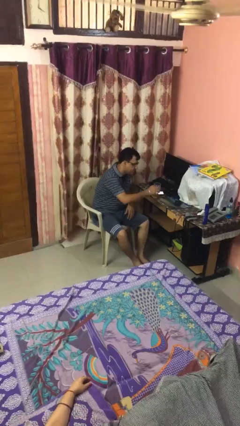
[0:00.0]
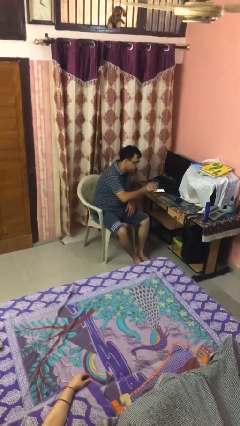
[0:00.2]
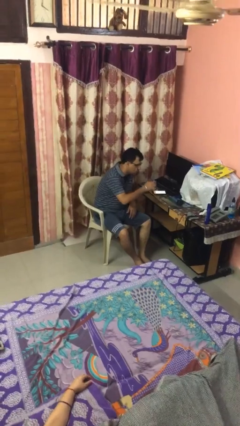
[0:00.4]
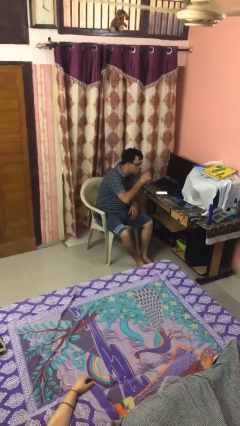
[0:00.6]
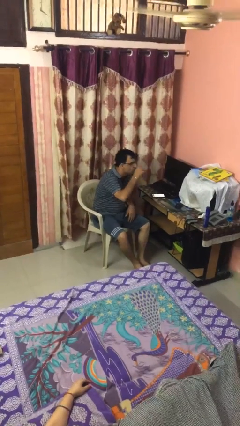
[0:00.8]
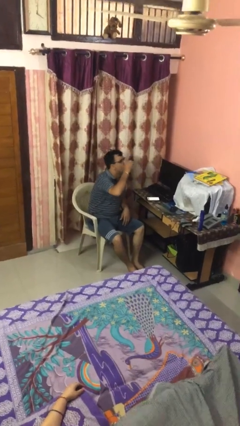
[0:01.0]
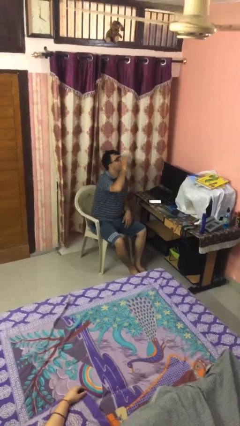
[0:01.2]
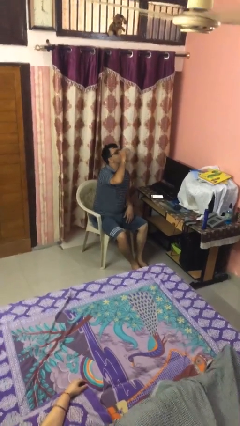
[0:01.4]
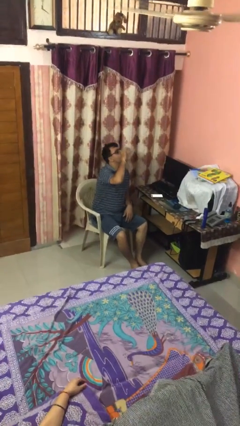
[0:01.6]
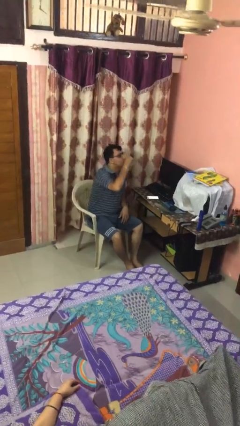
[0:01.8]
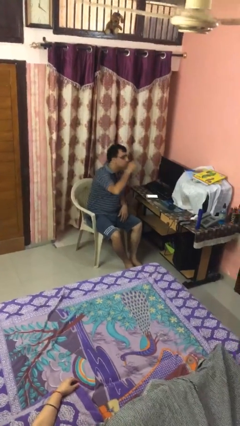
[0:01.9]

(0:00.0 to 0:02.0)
person drinks from shotglass

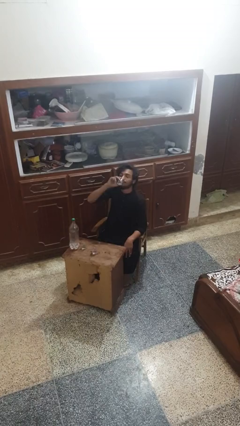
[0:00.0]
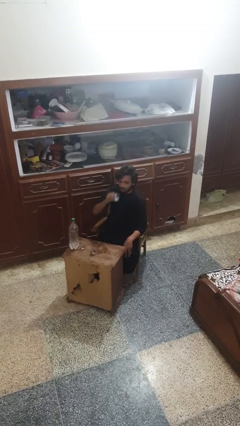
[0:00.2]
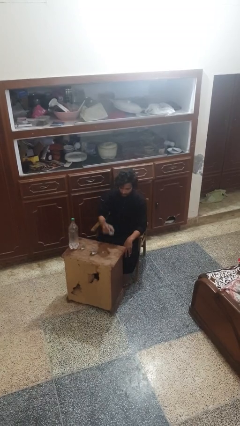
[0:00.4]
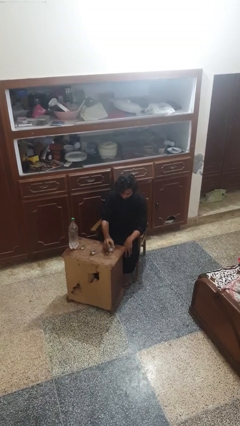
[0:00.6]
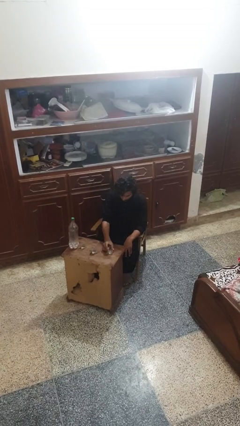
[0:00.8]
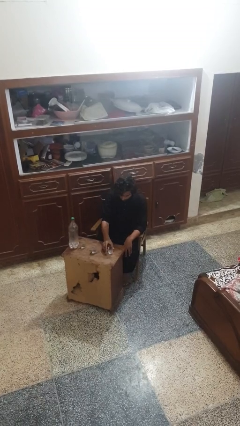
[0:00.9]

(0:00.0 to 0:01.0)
person puts down object on table

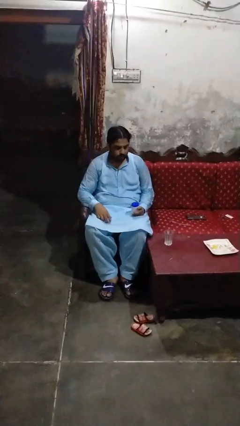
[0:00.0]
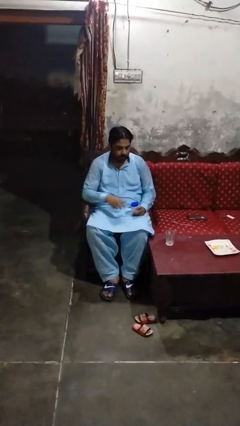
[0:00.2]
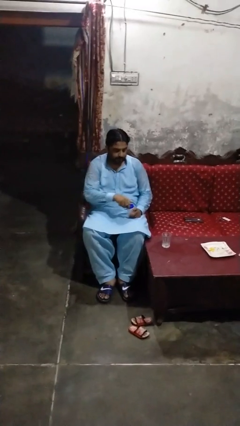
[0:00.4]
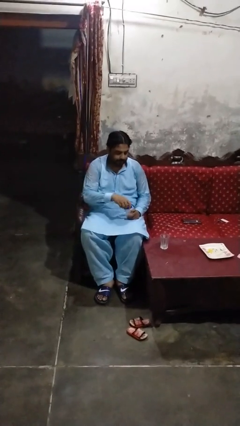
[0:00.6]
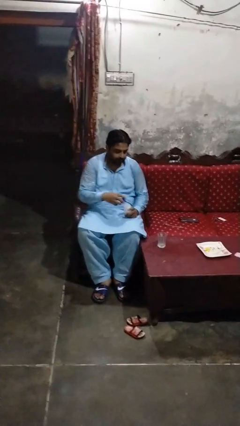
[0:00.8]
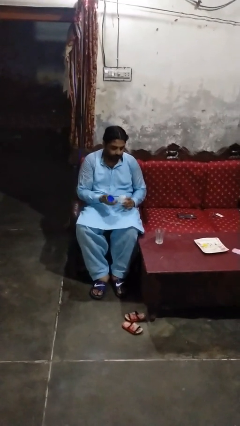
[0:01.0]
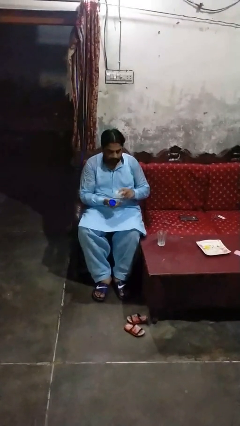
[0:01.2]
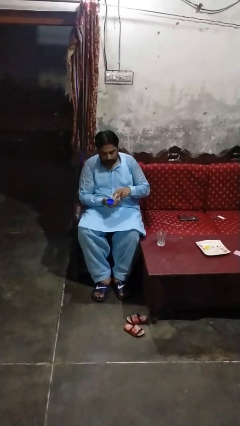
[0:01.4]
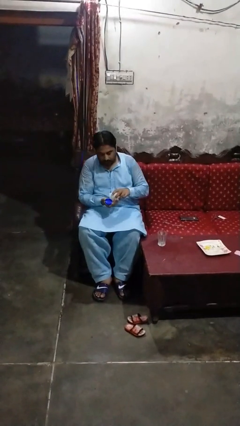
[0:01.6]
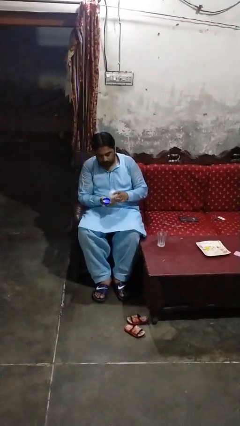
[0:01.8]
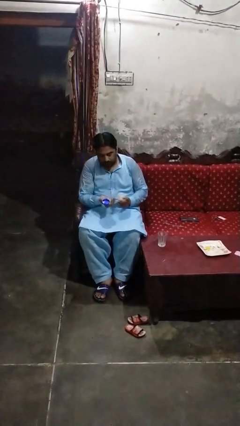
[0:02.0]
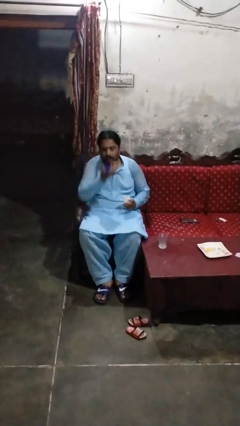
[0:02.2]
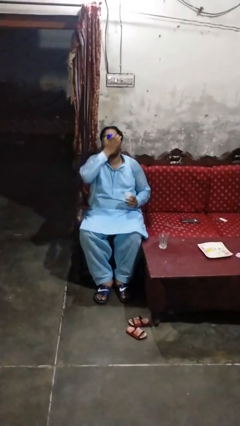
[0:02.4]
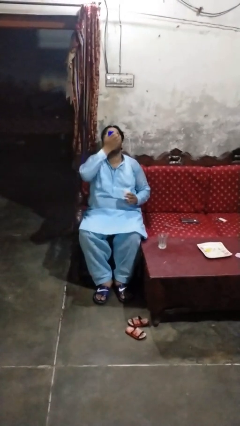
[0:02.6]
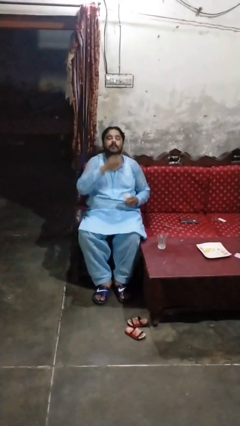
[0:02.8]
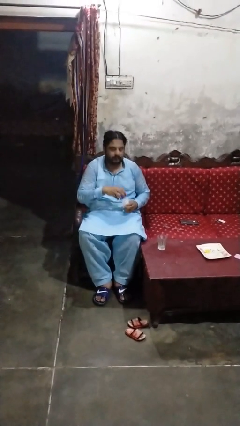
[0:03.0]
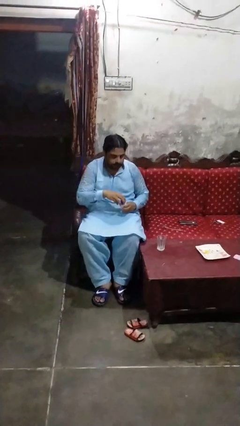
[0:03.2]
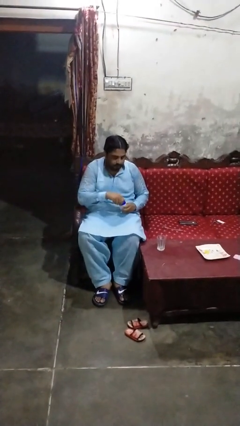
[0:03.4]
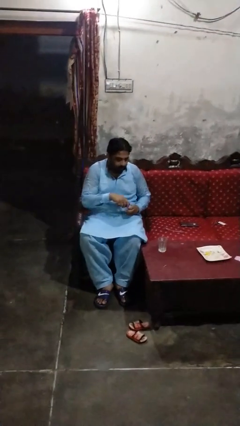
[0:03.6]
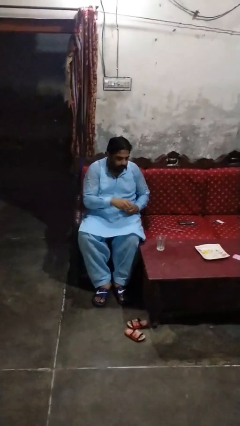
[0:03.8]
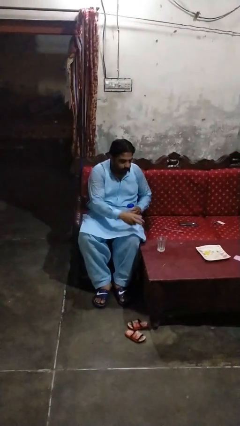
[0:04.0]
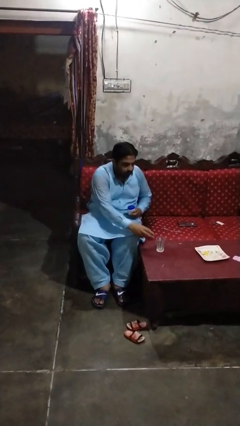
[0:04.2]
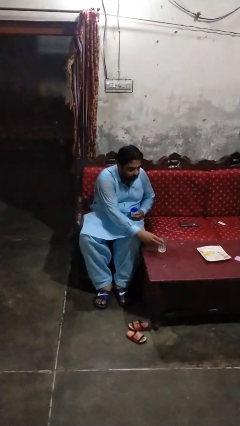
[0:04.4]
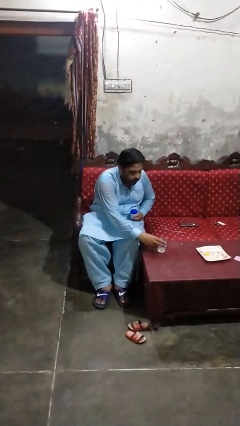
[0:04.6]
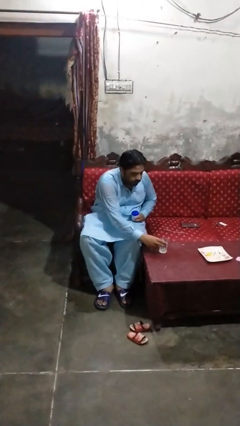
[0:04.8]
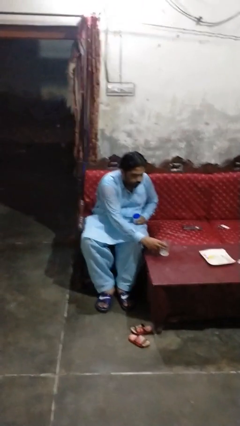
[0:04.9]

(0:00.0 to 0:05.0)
person takes medicine pills

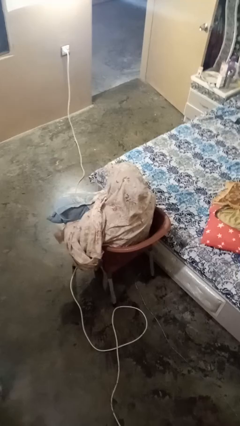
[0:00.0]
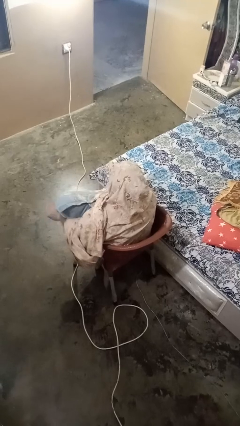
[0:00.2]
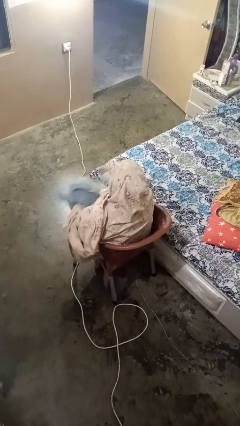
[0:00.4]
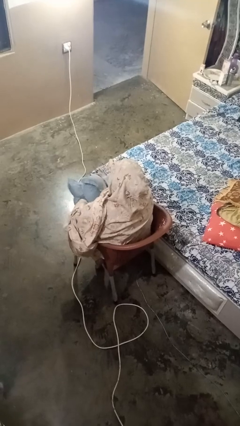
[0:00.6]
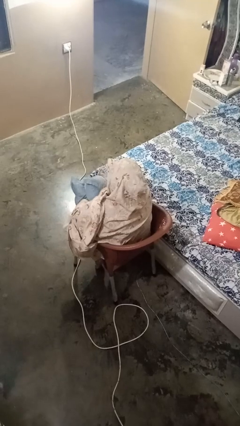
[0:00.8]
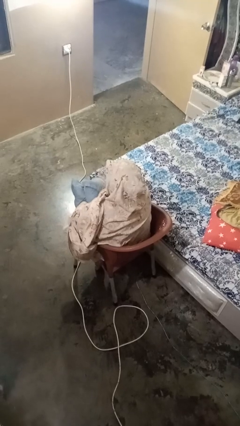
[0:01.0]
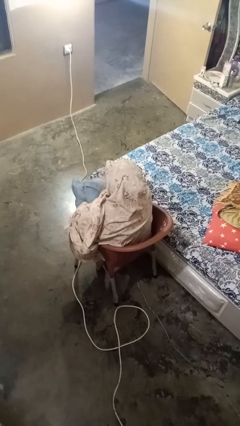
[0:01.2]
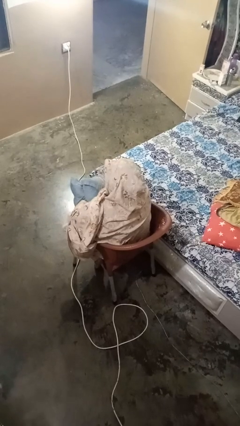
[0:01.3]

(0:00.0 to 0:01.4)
person squeezes object

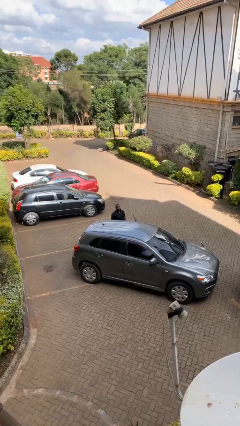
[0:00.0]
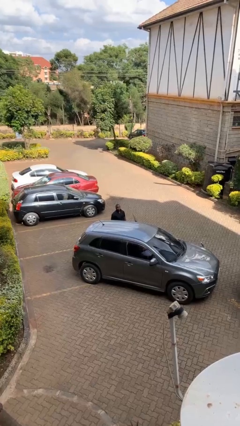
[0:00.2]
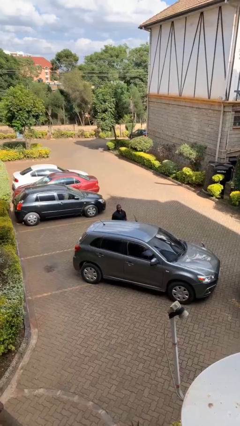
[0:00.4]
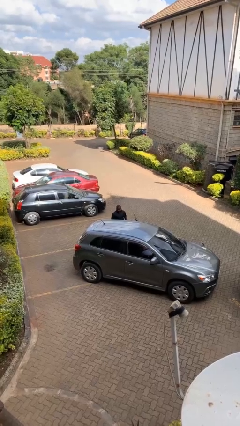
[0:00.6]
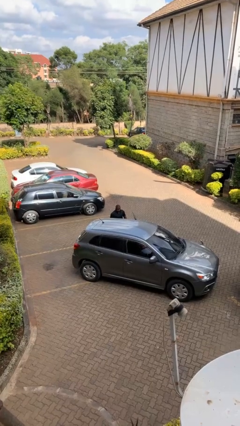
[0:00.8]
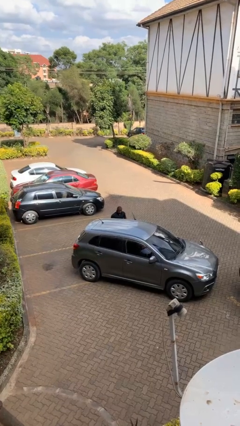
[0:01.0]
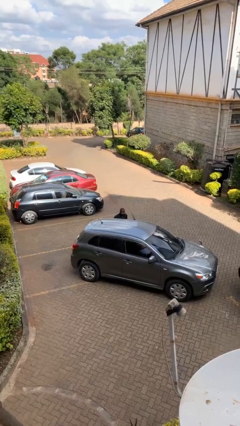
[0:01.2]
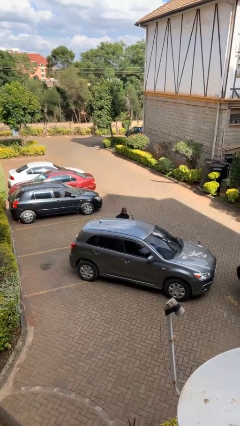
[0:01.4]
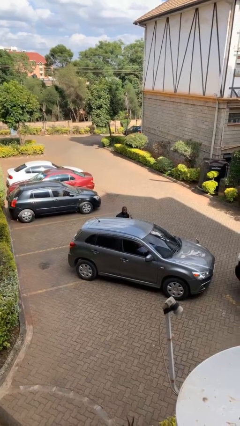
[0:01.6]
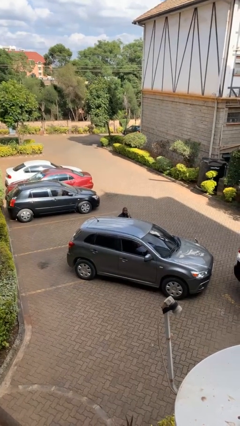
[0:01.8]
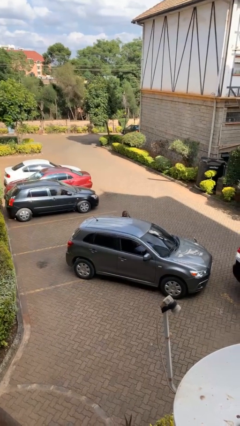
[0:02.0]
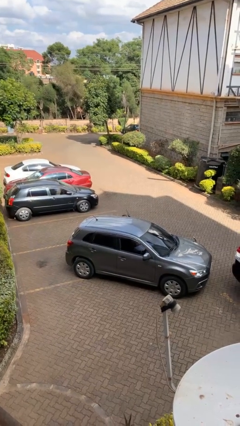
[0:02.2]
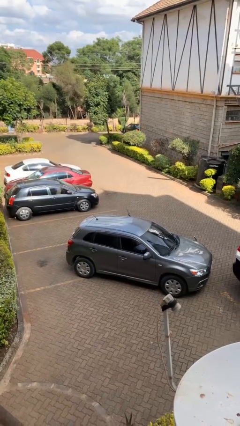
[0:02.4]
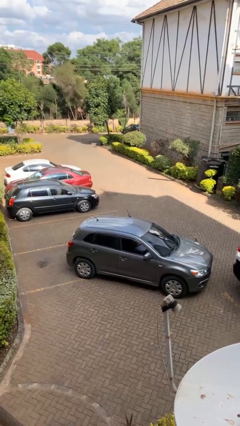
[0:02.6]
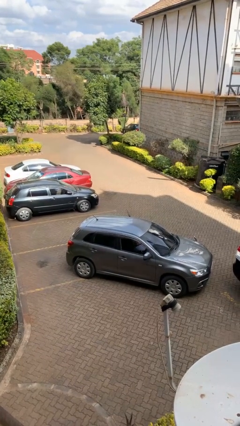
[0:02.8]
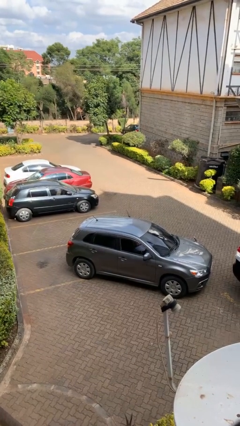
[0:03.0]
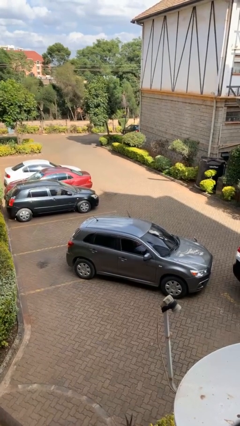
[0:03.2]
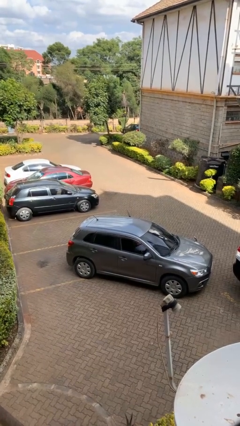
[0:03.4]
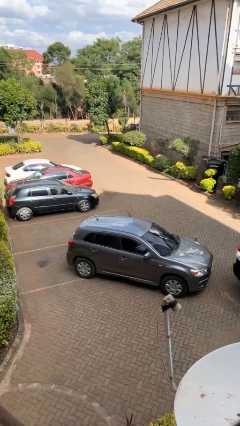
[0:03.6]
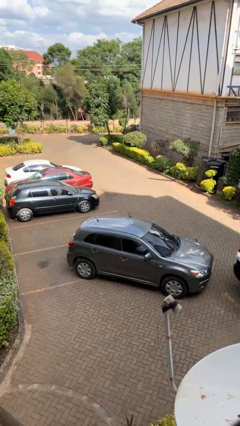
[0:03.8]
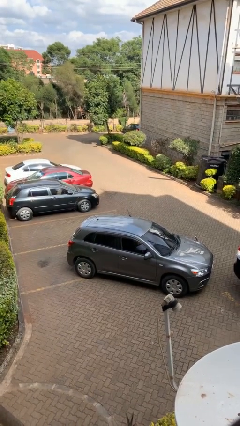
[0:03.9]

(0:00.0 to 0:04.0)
person enters car

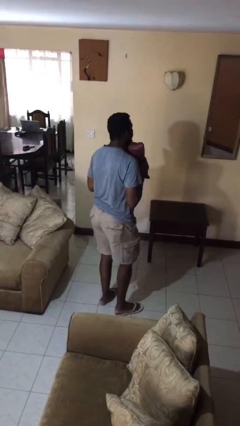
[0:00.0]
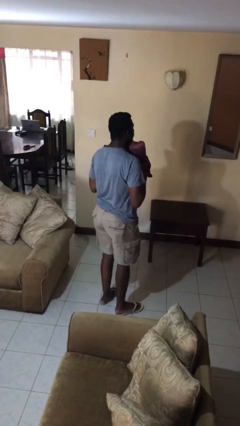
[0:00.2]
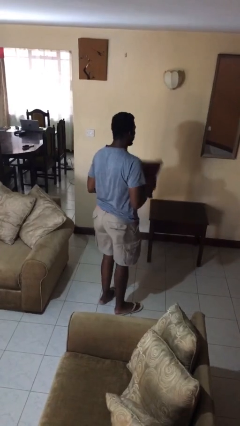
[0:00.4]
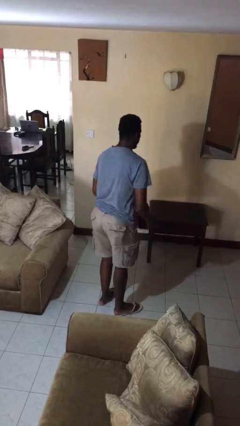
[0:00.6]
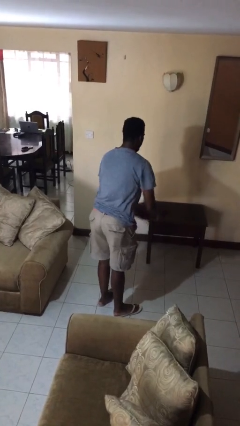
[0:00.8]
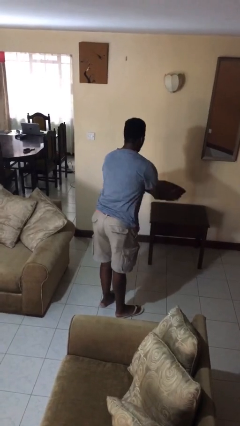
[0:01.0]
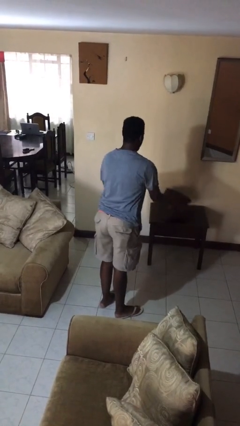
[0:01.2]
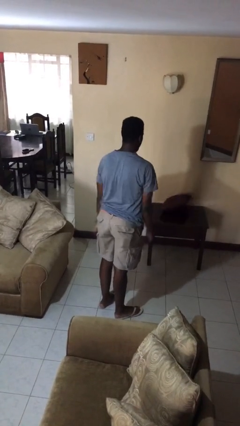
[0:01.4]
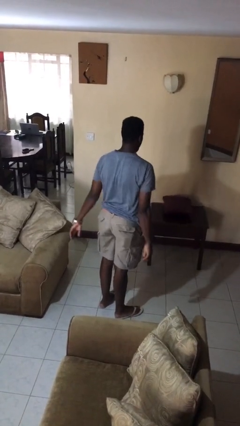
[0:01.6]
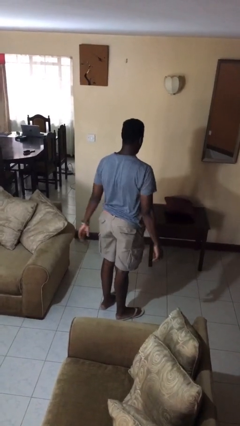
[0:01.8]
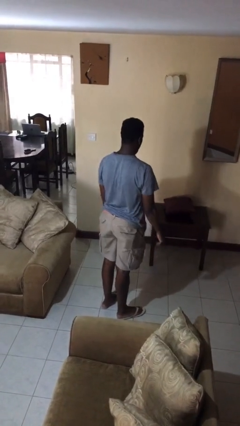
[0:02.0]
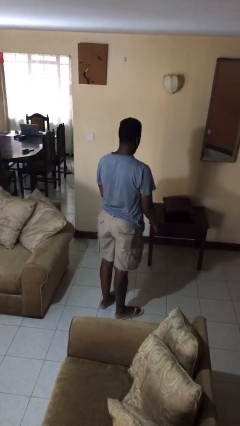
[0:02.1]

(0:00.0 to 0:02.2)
person throws object on table

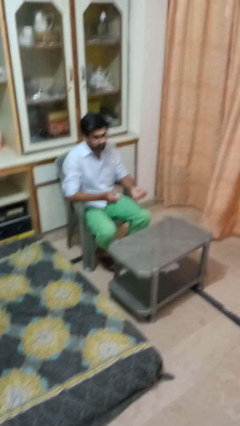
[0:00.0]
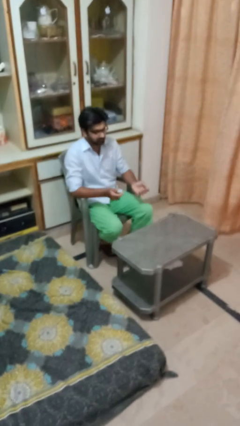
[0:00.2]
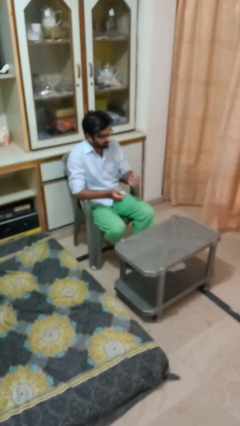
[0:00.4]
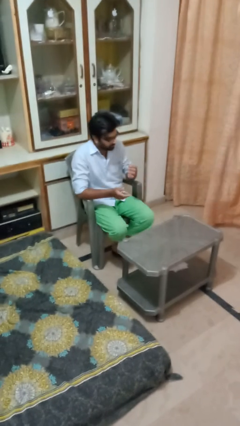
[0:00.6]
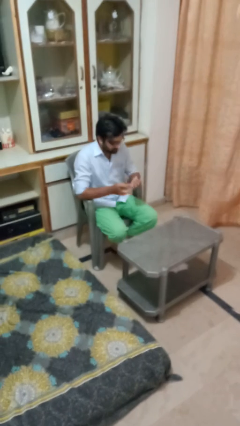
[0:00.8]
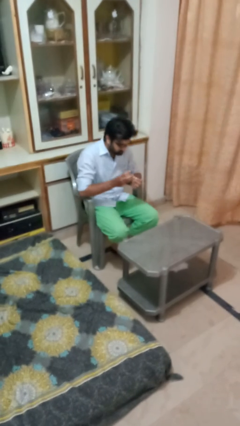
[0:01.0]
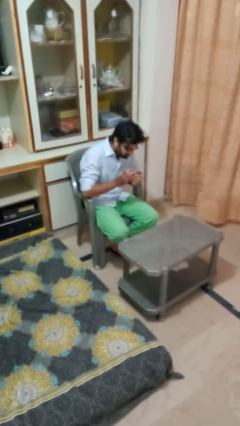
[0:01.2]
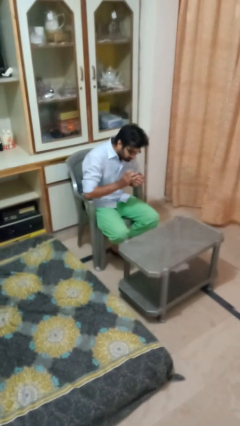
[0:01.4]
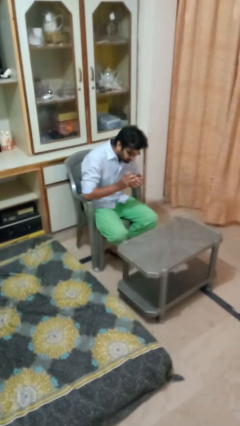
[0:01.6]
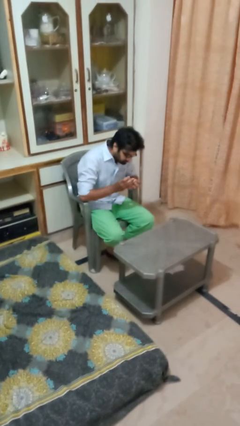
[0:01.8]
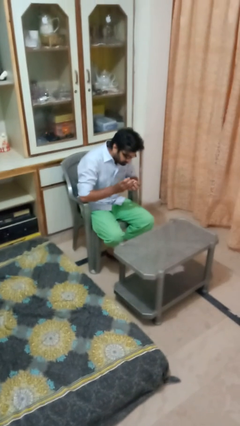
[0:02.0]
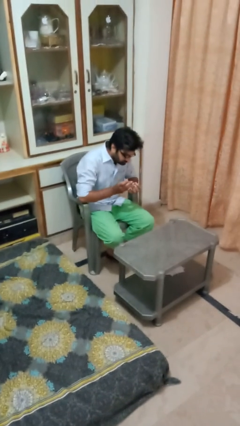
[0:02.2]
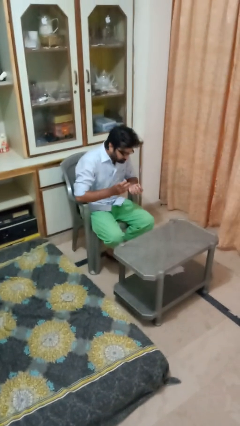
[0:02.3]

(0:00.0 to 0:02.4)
person clips fingernails
